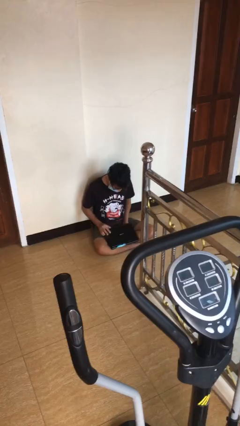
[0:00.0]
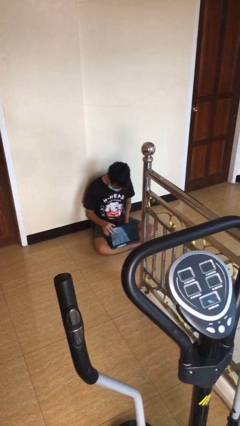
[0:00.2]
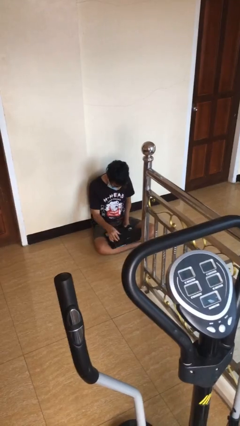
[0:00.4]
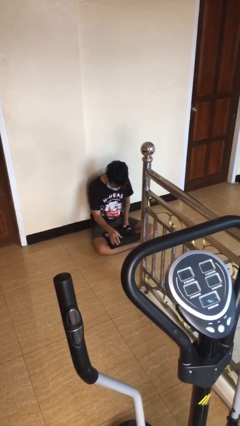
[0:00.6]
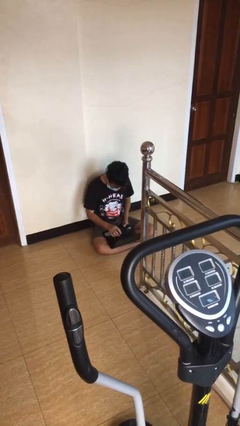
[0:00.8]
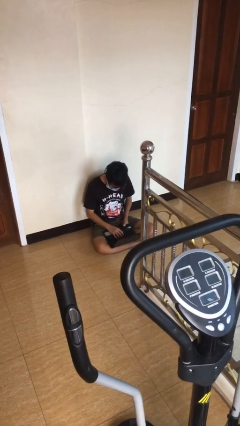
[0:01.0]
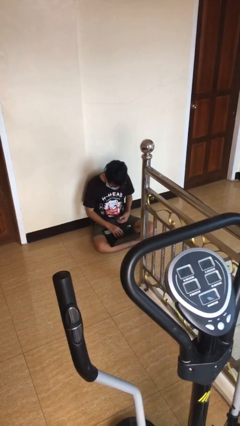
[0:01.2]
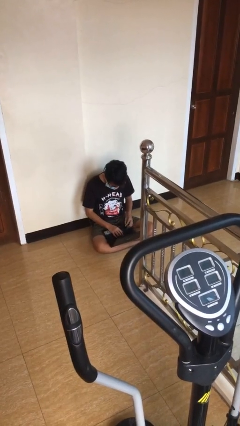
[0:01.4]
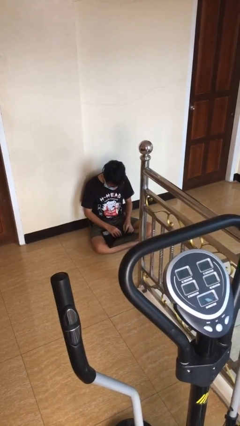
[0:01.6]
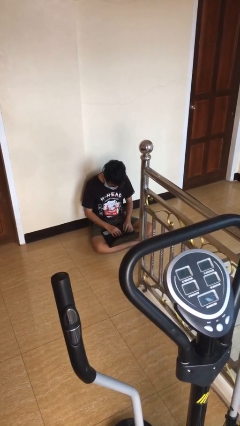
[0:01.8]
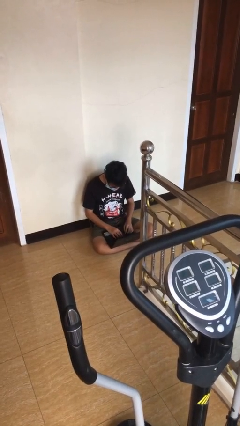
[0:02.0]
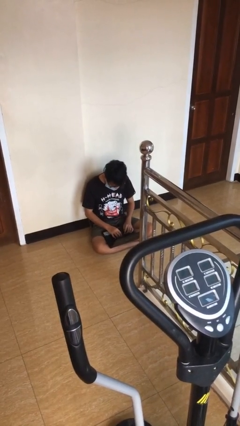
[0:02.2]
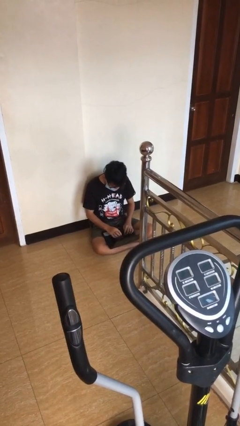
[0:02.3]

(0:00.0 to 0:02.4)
person interacts with laptop

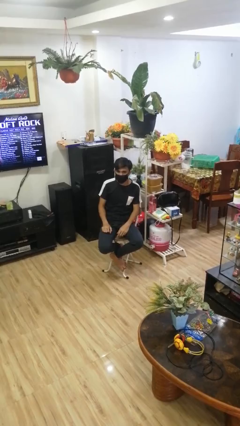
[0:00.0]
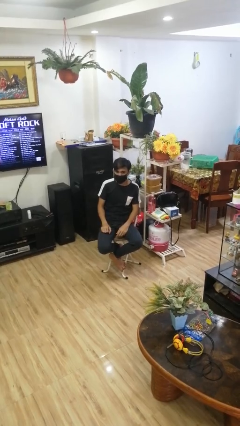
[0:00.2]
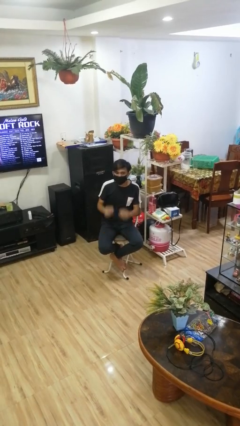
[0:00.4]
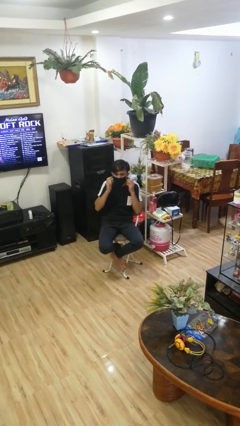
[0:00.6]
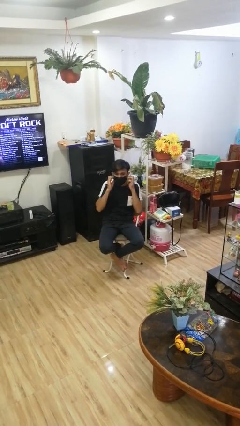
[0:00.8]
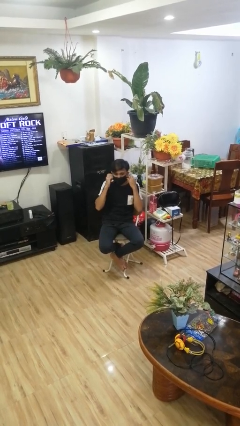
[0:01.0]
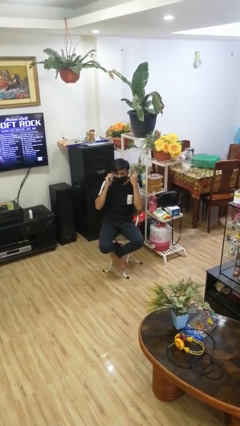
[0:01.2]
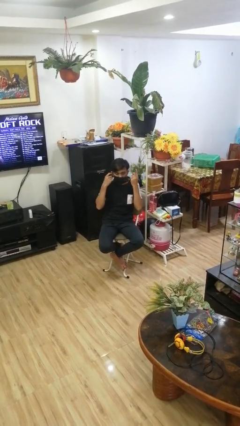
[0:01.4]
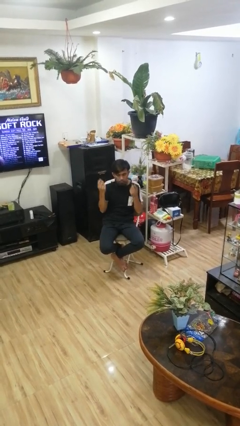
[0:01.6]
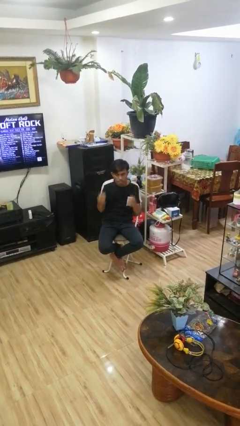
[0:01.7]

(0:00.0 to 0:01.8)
person takes off facemask

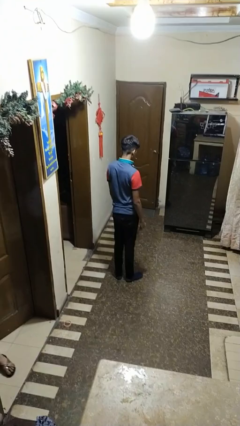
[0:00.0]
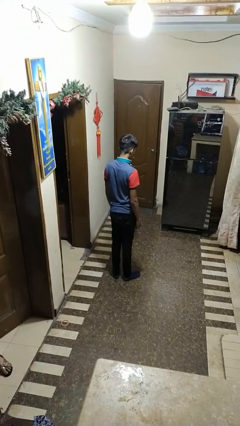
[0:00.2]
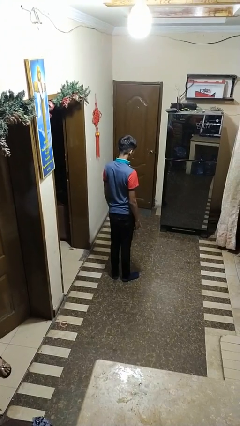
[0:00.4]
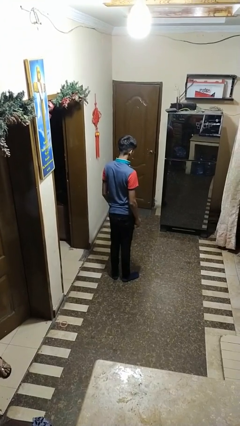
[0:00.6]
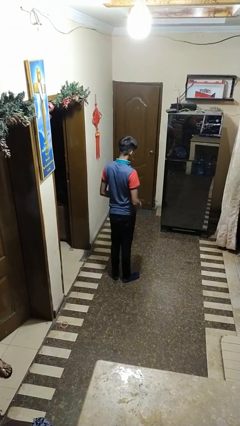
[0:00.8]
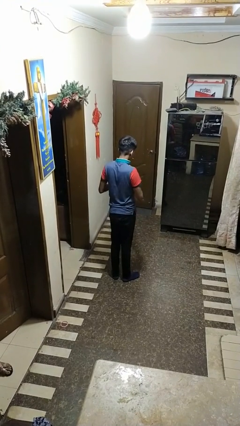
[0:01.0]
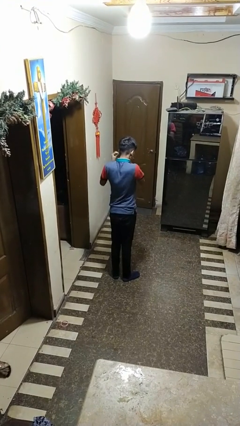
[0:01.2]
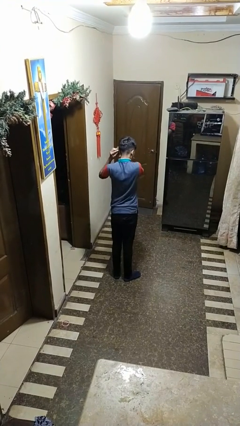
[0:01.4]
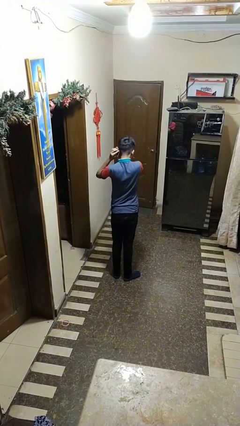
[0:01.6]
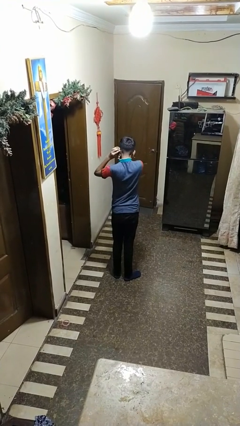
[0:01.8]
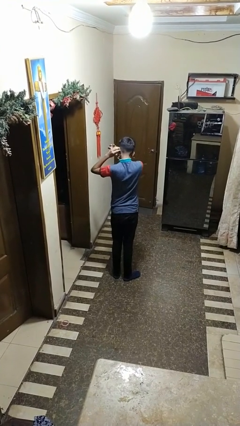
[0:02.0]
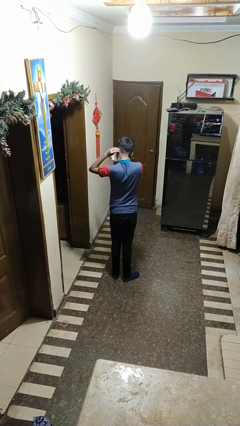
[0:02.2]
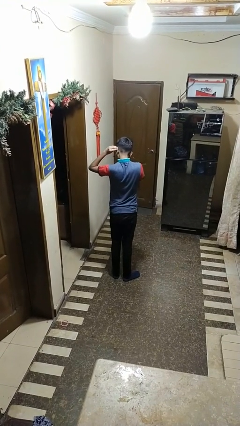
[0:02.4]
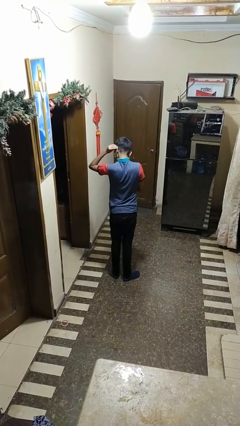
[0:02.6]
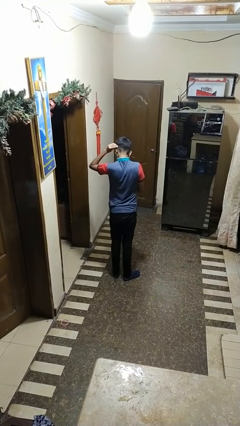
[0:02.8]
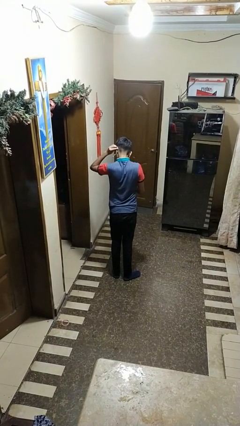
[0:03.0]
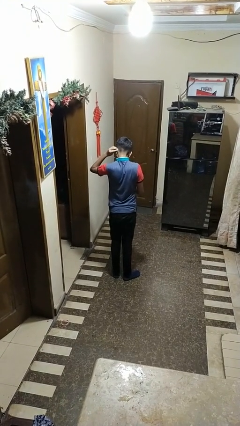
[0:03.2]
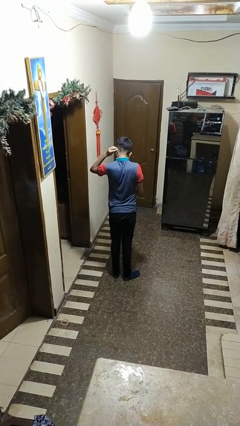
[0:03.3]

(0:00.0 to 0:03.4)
person puts on earrings

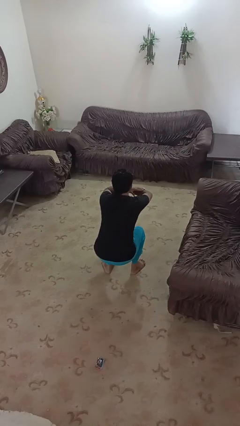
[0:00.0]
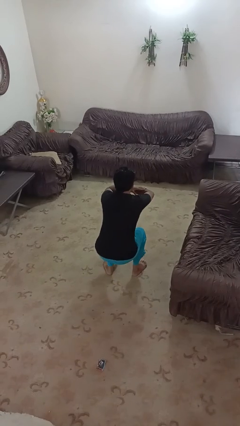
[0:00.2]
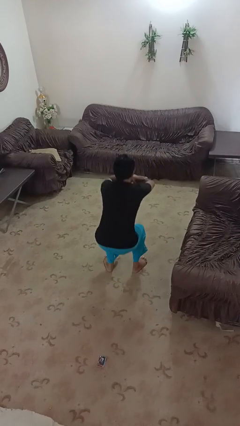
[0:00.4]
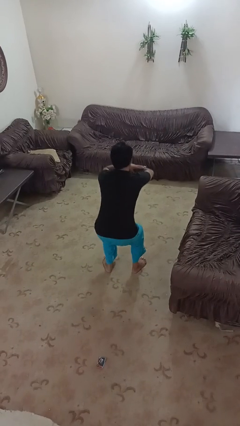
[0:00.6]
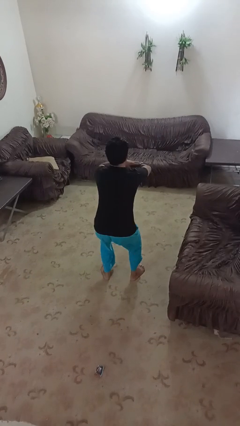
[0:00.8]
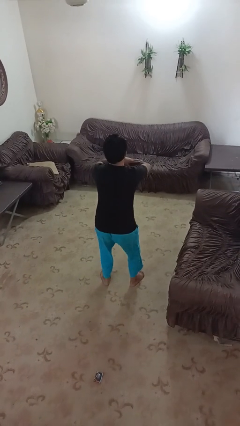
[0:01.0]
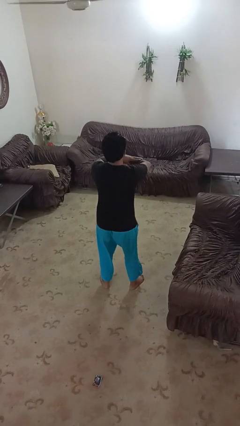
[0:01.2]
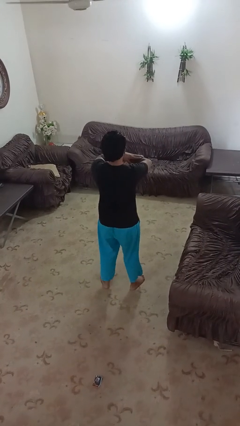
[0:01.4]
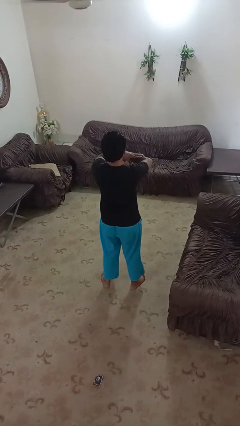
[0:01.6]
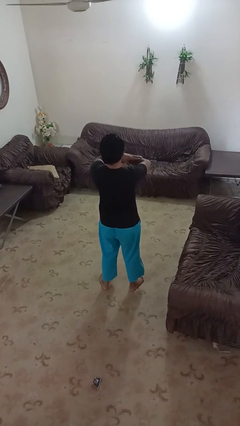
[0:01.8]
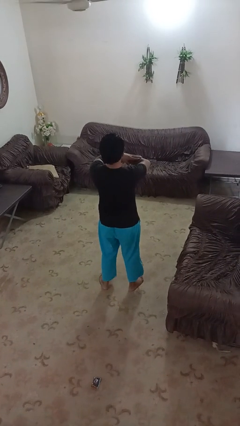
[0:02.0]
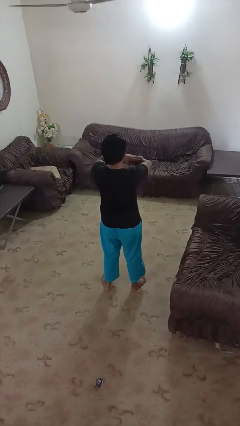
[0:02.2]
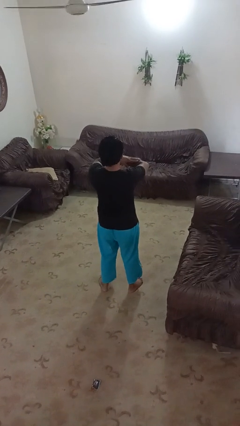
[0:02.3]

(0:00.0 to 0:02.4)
person stands up

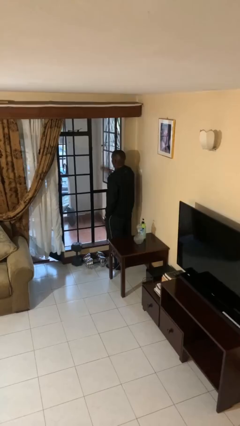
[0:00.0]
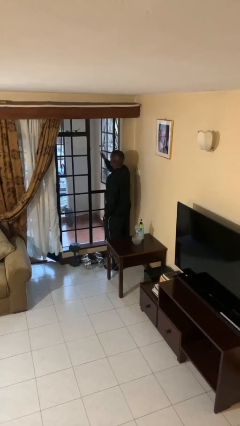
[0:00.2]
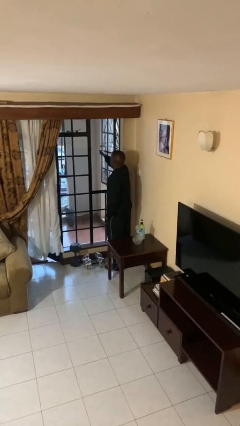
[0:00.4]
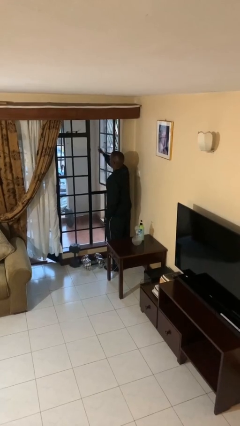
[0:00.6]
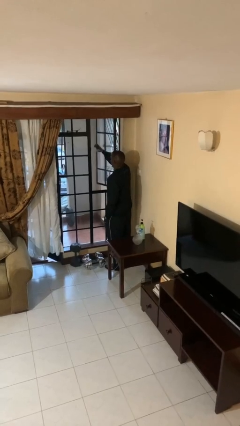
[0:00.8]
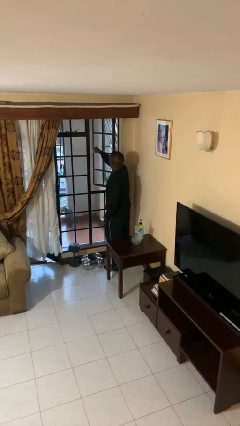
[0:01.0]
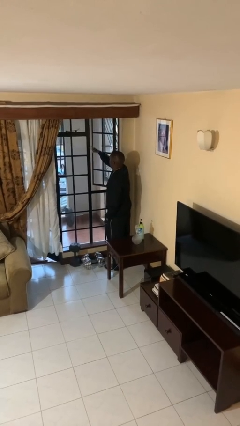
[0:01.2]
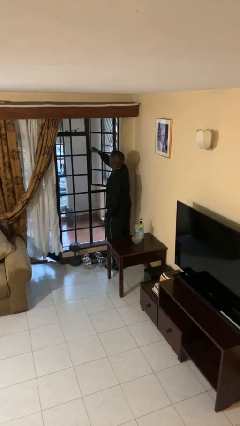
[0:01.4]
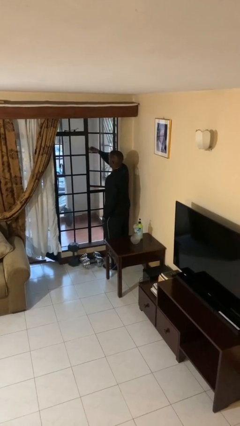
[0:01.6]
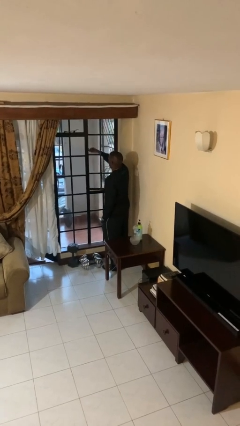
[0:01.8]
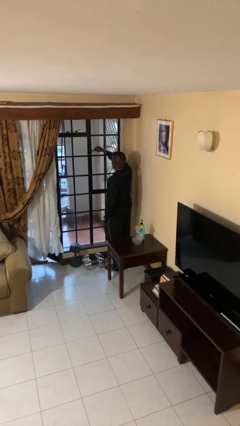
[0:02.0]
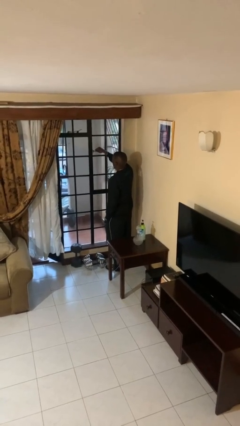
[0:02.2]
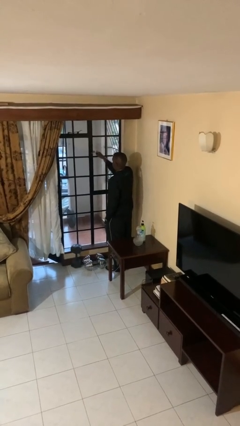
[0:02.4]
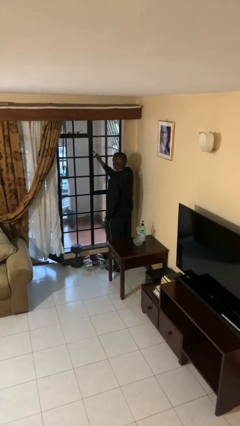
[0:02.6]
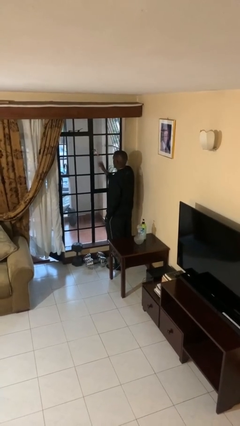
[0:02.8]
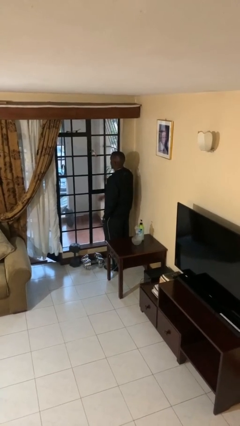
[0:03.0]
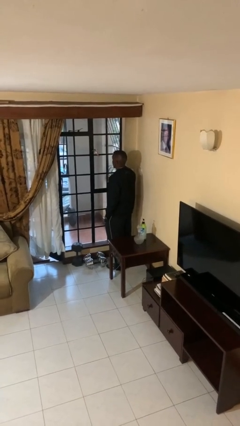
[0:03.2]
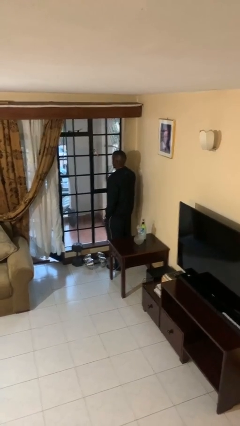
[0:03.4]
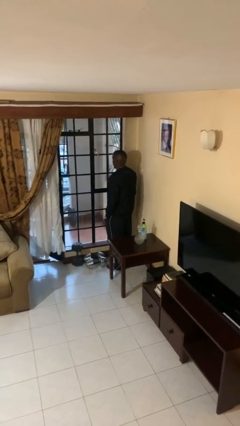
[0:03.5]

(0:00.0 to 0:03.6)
person closes home window

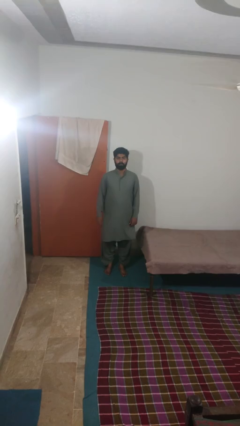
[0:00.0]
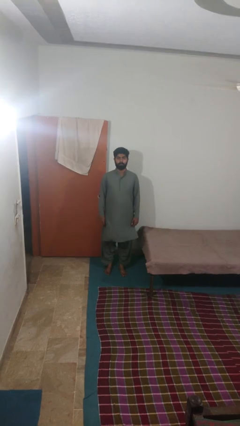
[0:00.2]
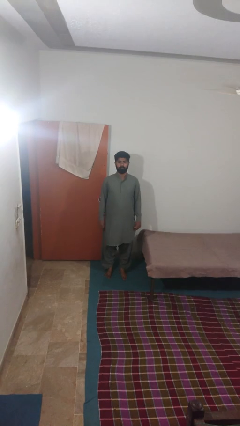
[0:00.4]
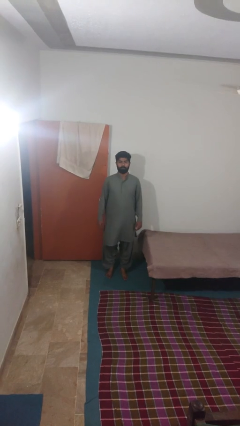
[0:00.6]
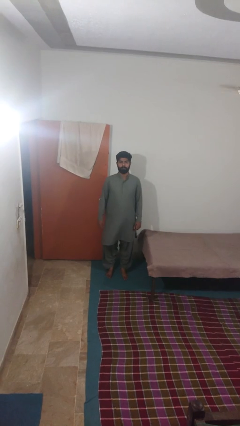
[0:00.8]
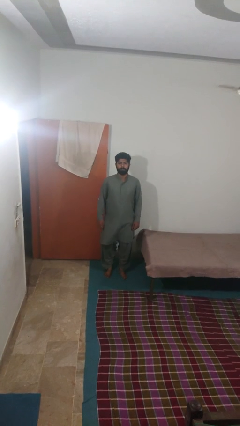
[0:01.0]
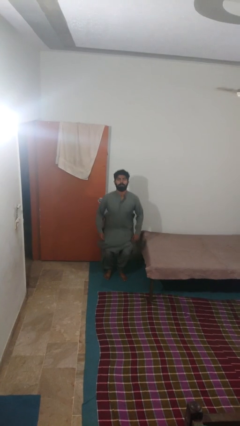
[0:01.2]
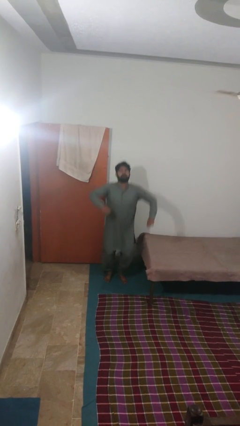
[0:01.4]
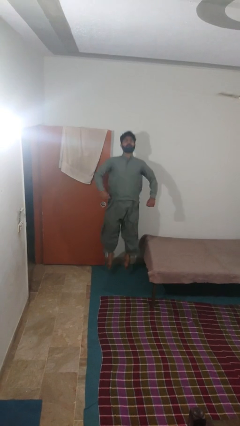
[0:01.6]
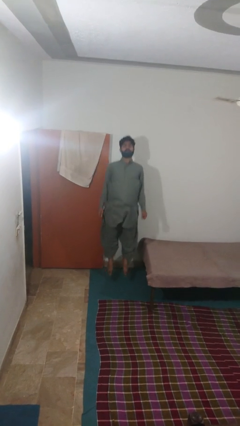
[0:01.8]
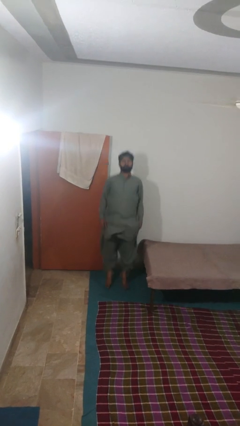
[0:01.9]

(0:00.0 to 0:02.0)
person jumps

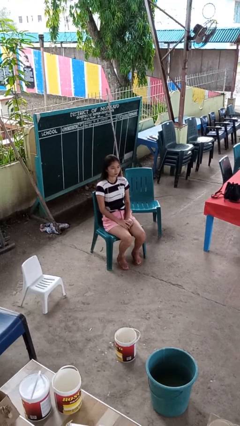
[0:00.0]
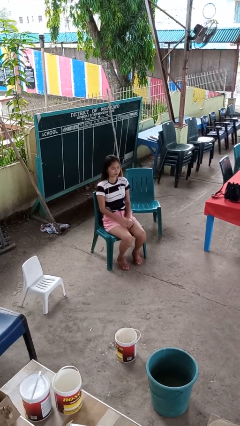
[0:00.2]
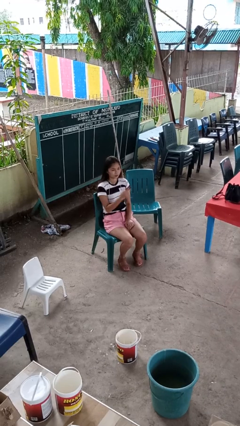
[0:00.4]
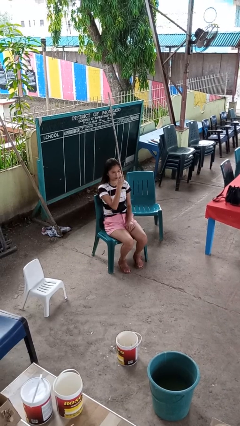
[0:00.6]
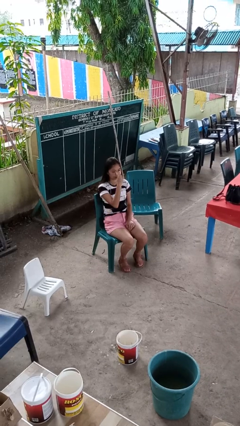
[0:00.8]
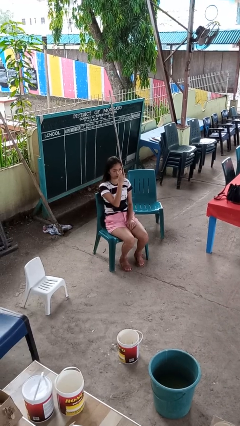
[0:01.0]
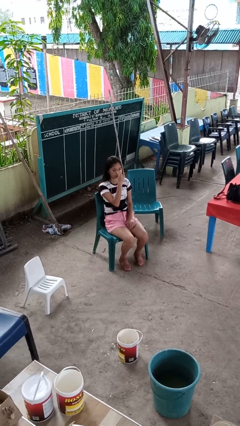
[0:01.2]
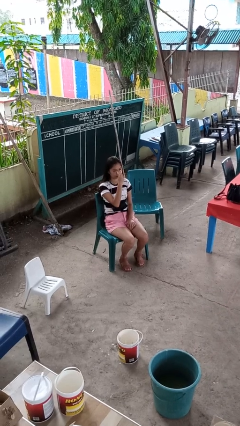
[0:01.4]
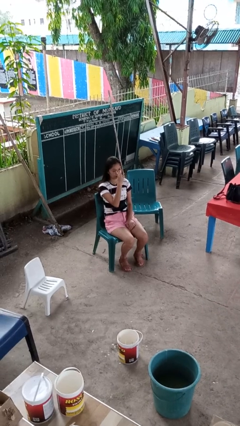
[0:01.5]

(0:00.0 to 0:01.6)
person gestures watch closely
